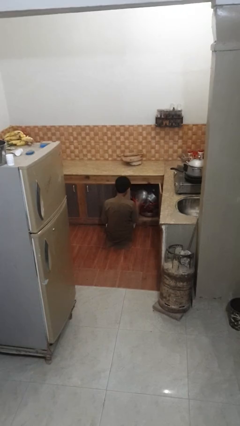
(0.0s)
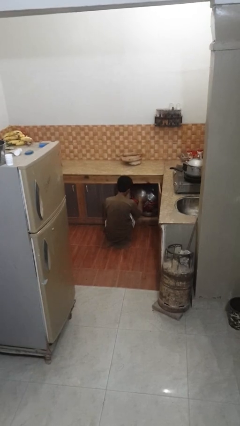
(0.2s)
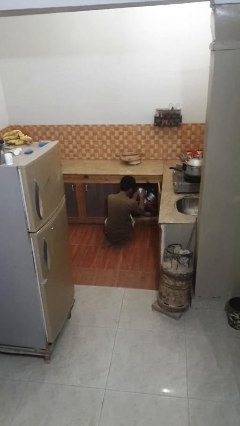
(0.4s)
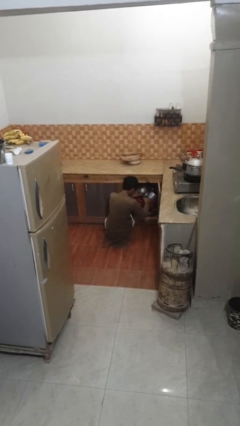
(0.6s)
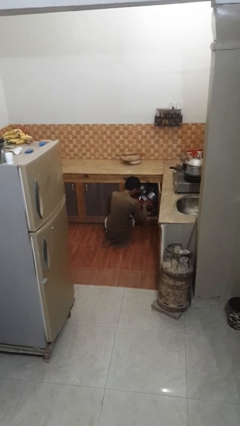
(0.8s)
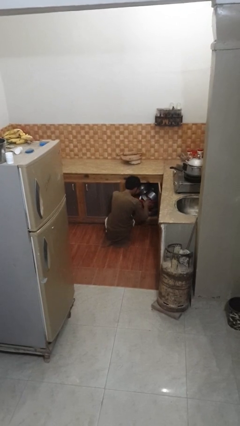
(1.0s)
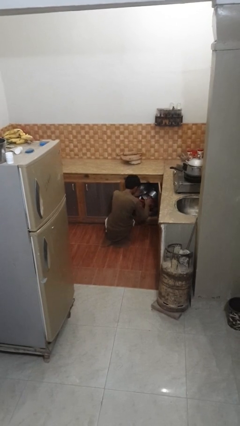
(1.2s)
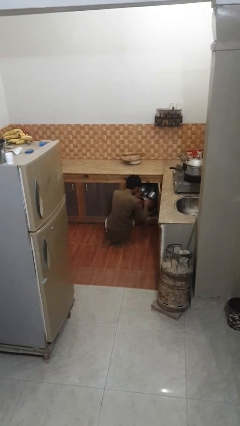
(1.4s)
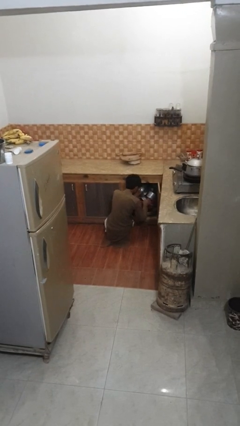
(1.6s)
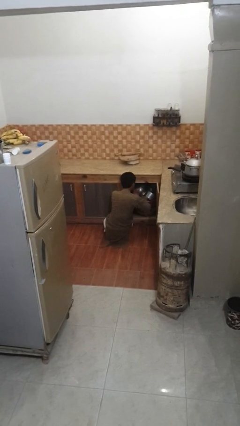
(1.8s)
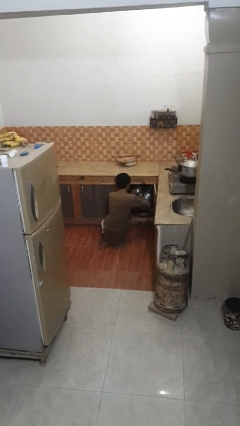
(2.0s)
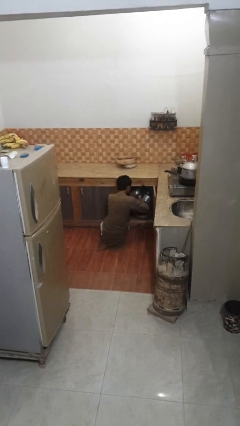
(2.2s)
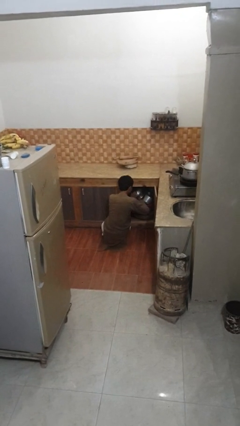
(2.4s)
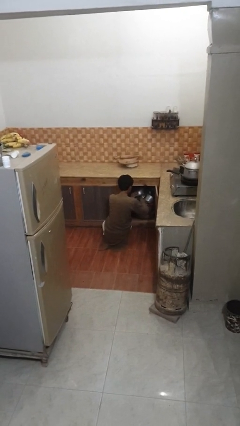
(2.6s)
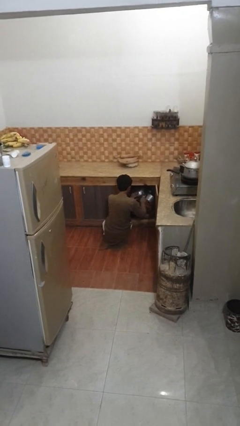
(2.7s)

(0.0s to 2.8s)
person searches in kitchen drawer

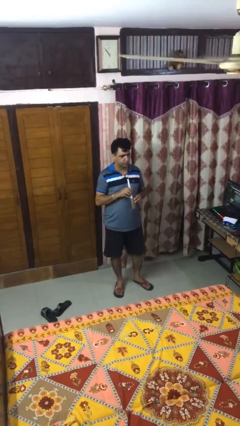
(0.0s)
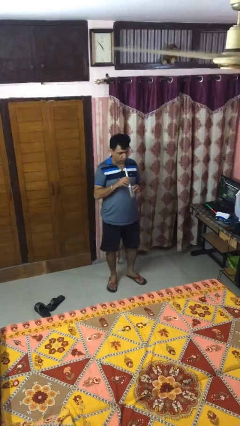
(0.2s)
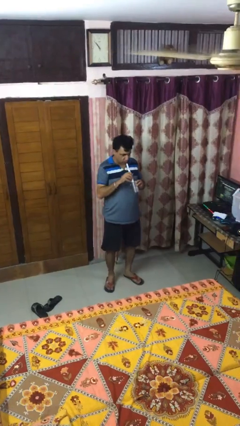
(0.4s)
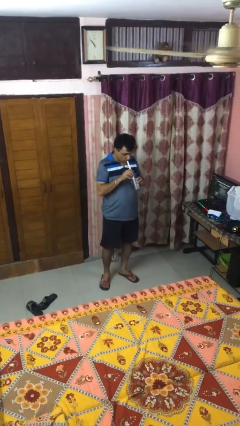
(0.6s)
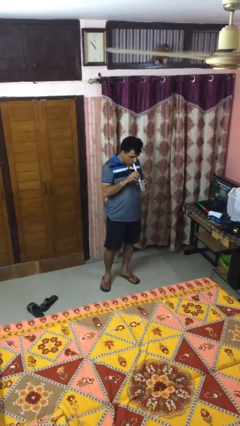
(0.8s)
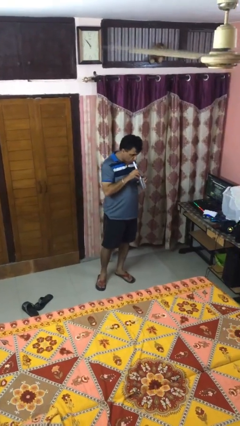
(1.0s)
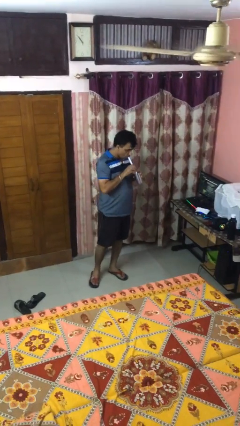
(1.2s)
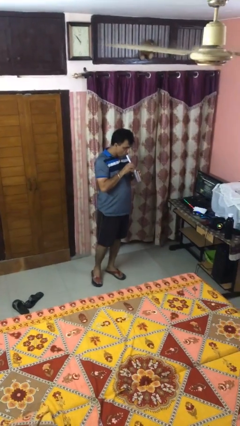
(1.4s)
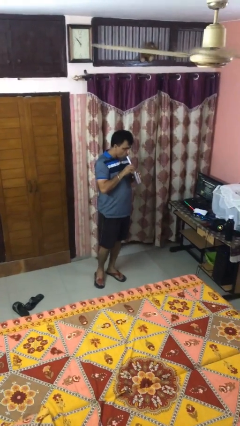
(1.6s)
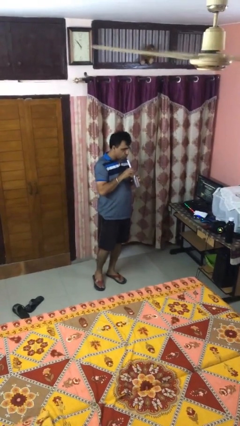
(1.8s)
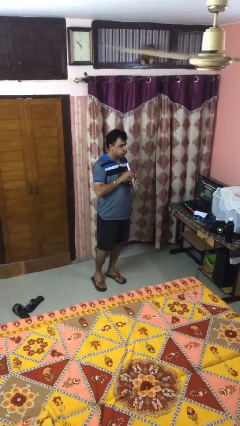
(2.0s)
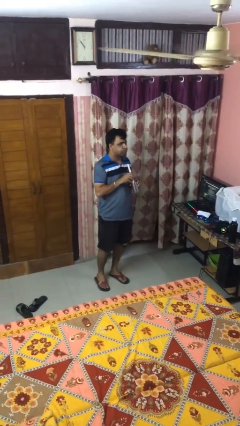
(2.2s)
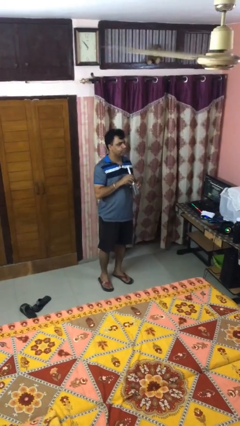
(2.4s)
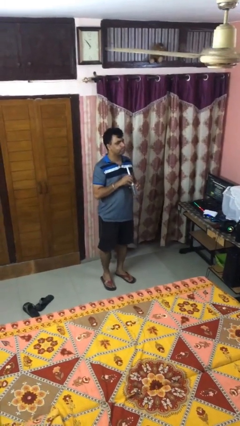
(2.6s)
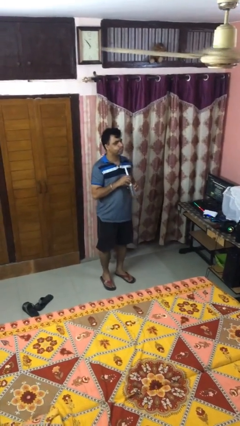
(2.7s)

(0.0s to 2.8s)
person drinks from straw

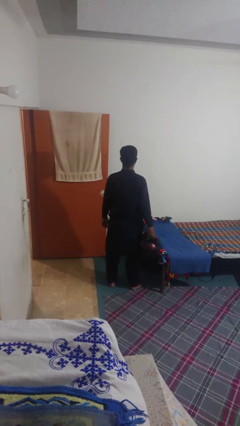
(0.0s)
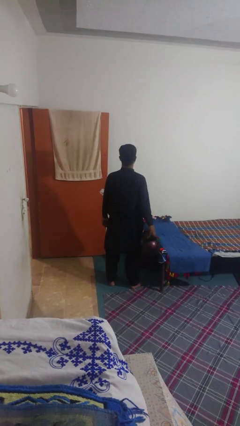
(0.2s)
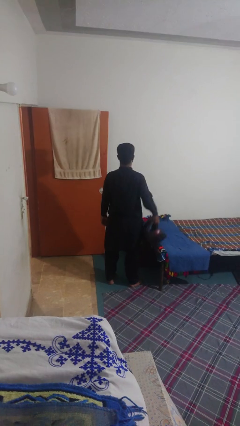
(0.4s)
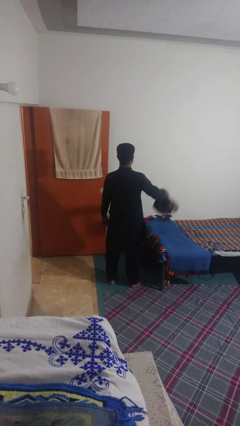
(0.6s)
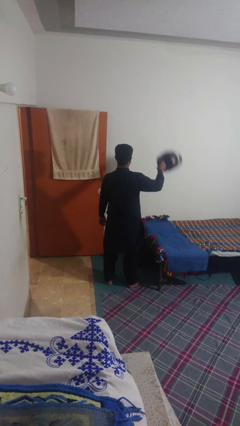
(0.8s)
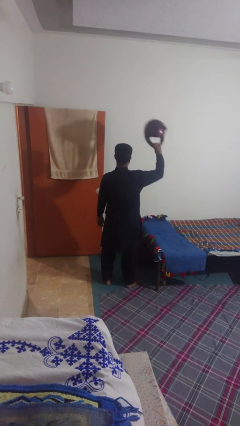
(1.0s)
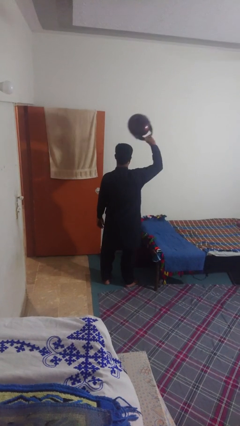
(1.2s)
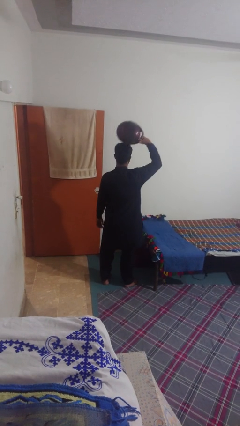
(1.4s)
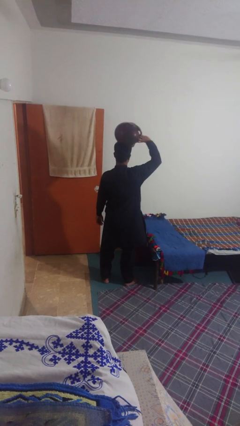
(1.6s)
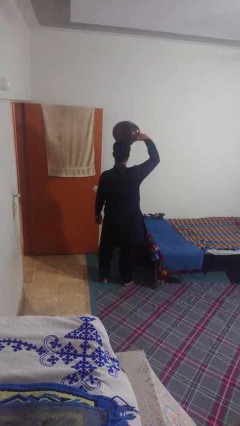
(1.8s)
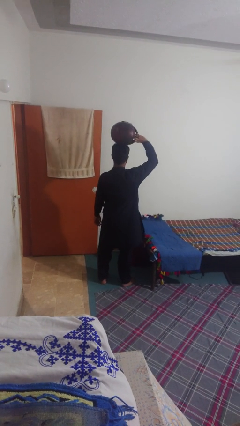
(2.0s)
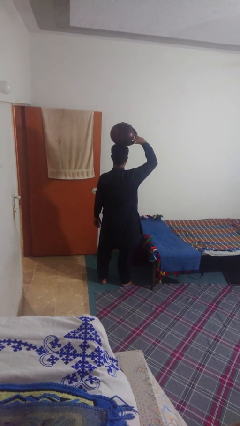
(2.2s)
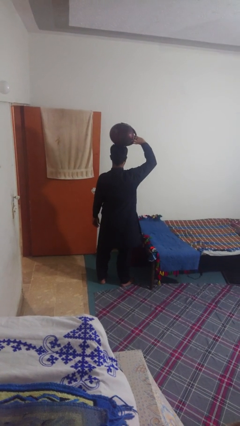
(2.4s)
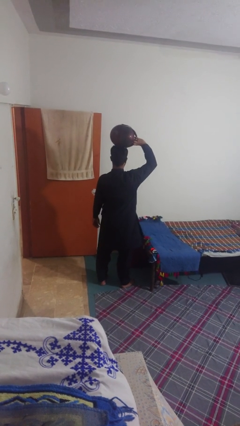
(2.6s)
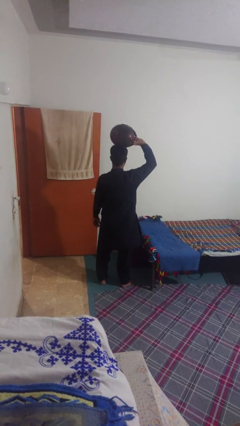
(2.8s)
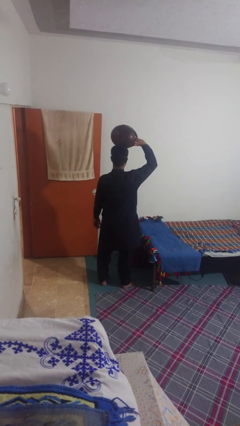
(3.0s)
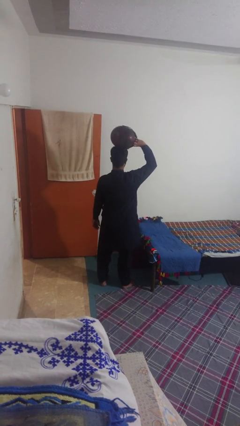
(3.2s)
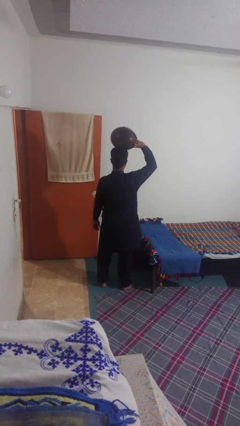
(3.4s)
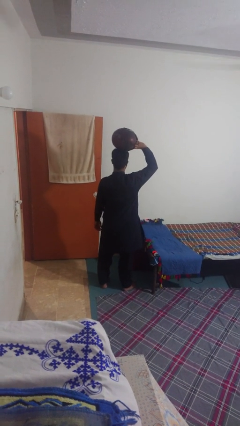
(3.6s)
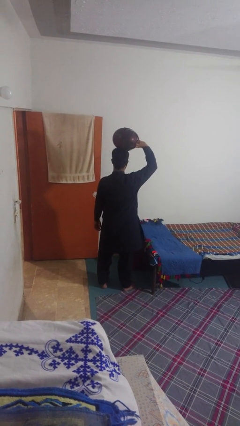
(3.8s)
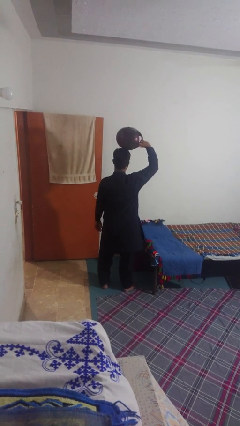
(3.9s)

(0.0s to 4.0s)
person holds object above head

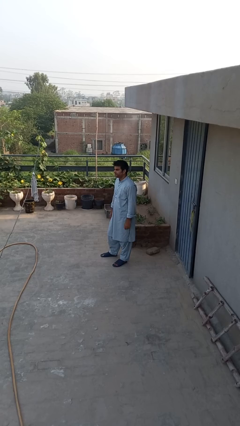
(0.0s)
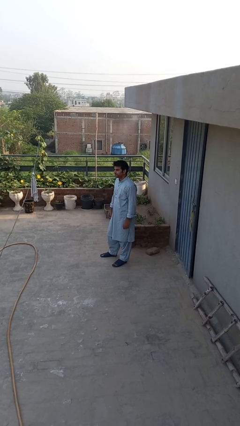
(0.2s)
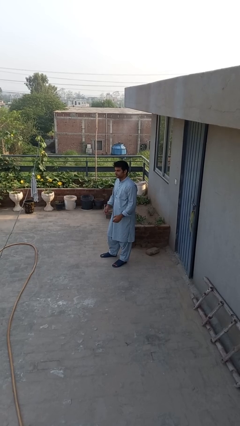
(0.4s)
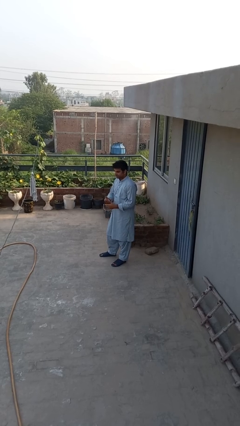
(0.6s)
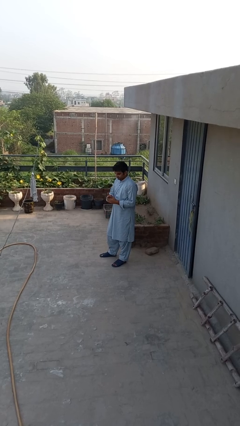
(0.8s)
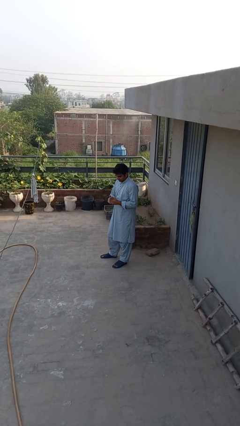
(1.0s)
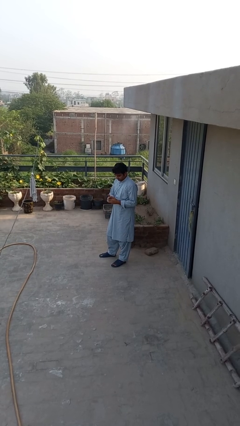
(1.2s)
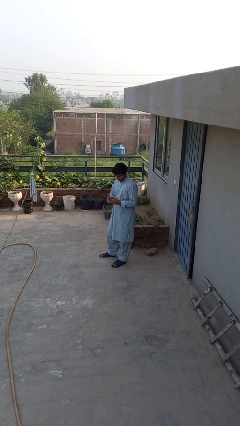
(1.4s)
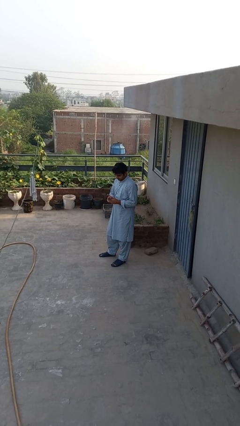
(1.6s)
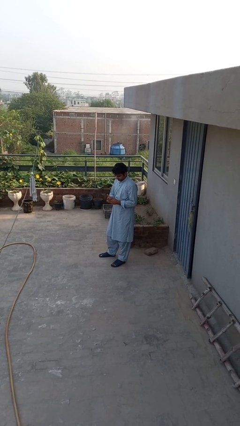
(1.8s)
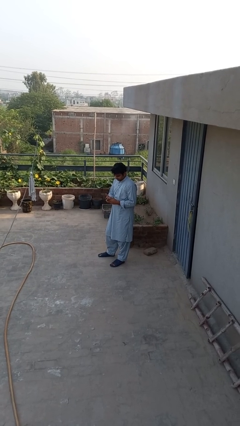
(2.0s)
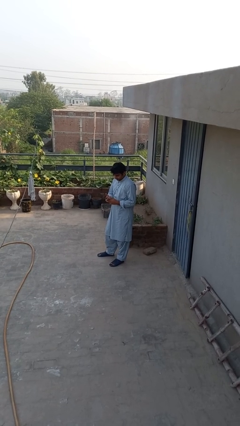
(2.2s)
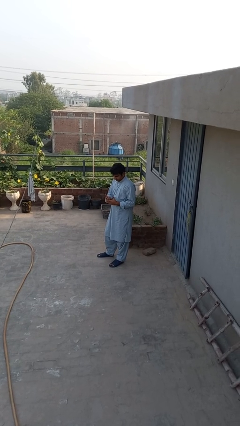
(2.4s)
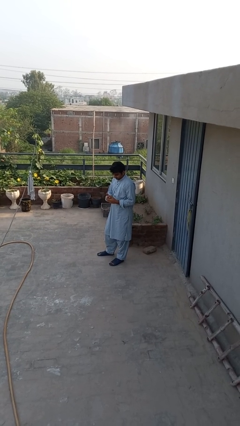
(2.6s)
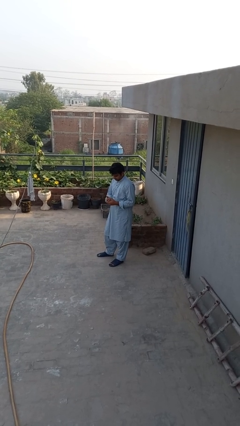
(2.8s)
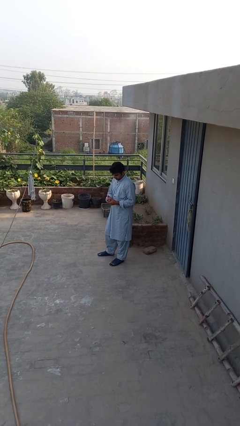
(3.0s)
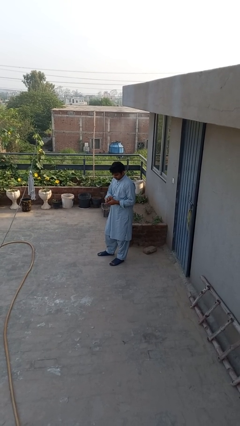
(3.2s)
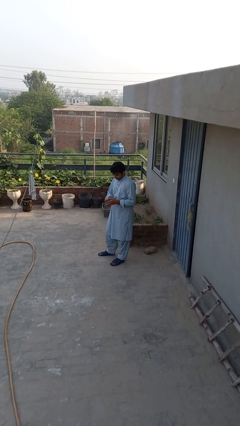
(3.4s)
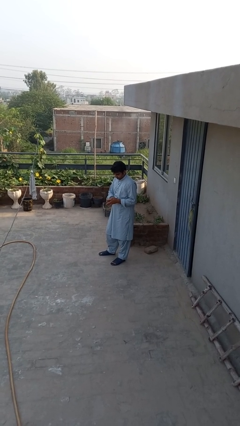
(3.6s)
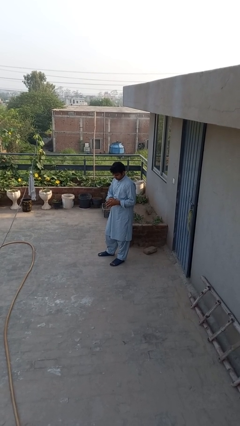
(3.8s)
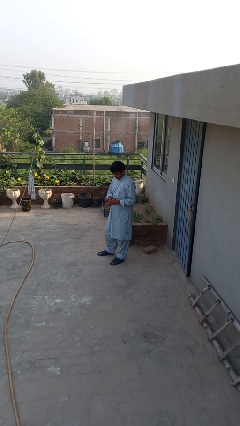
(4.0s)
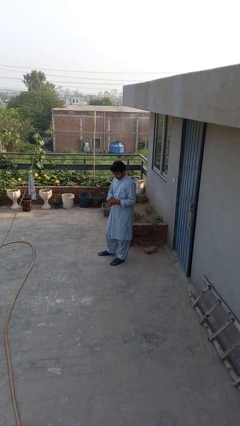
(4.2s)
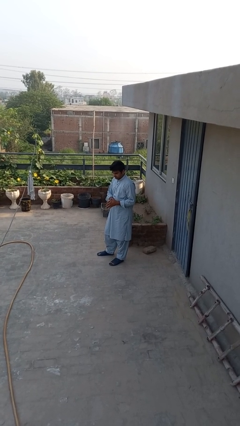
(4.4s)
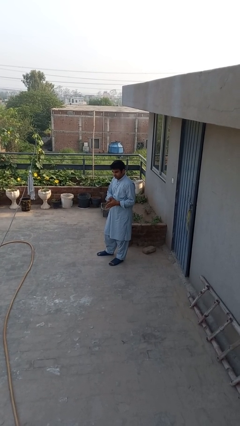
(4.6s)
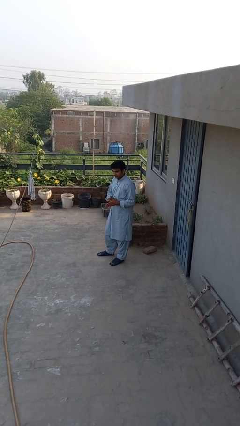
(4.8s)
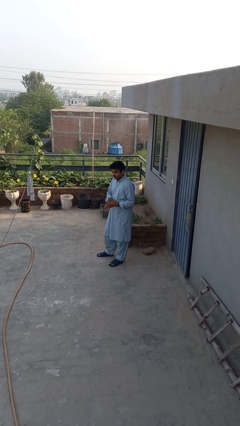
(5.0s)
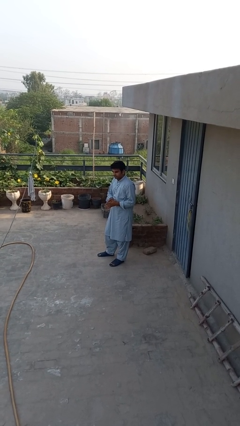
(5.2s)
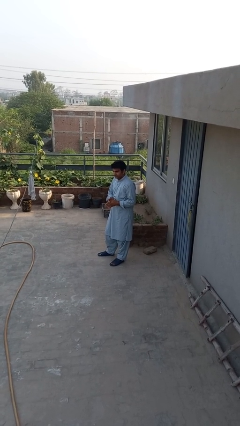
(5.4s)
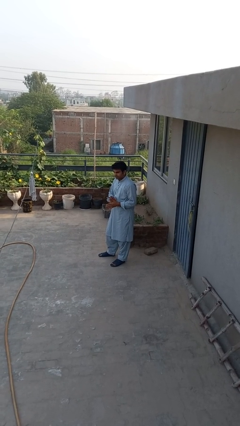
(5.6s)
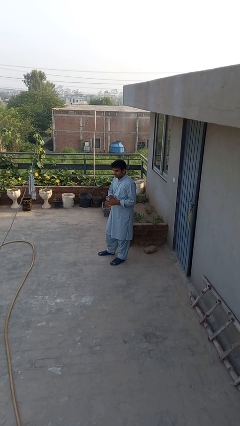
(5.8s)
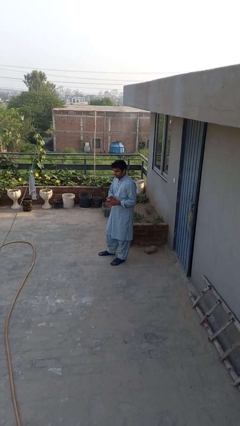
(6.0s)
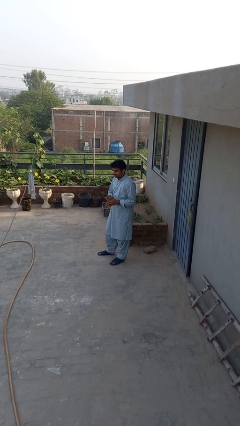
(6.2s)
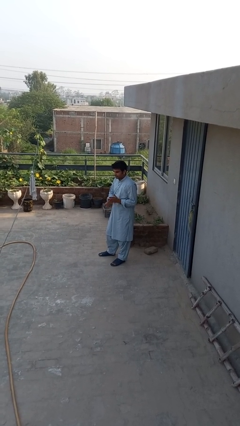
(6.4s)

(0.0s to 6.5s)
person cracks knuckles

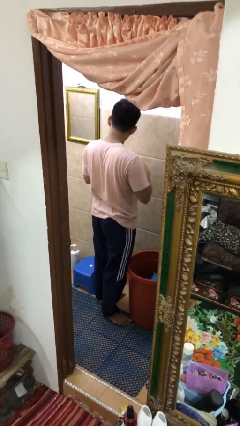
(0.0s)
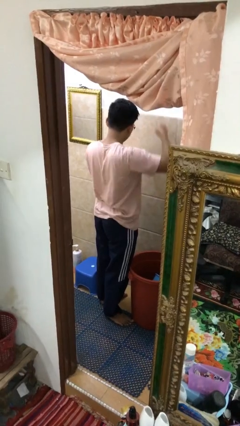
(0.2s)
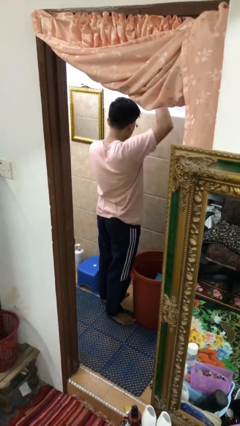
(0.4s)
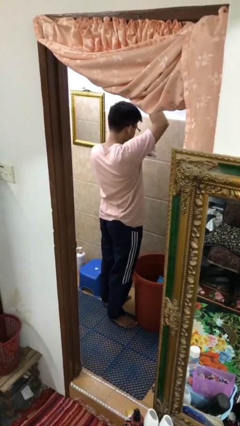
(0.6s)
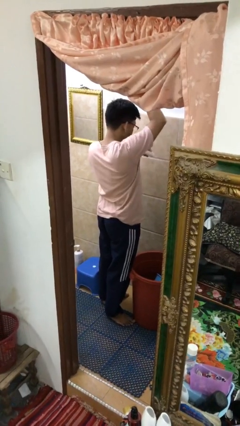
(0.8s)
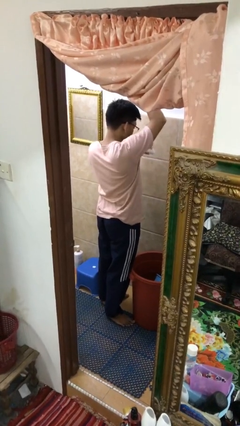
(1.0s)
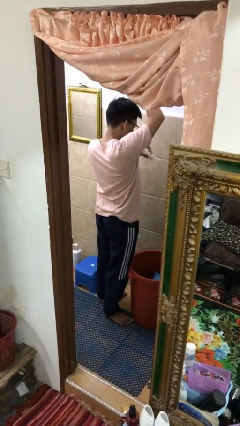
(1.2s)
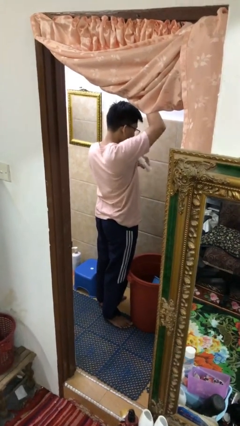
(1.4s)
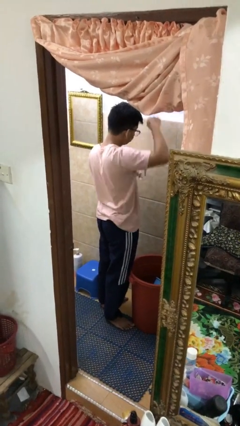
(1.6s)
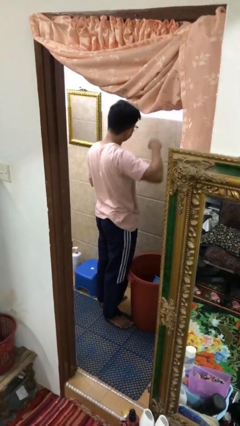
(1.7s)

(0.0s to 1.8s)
person applies deodorant

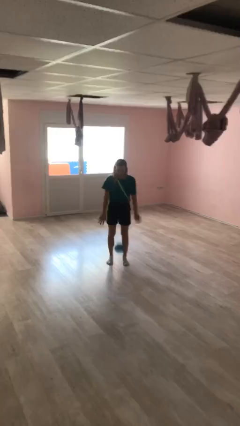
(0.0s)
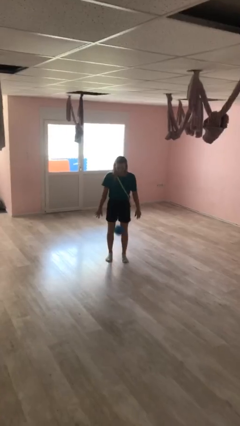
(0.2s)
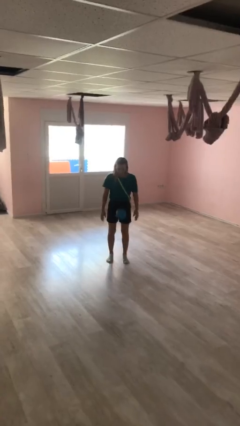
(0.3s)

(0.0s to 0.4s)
person bounces ball on floor
